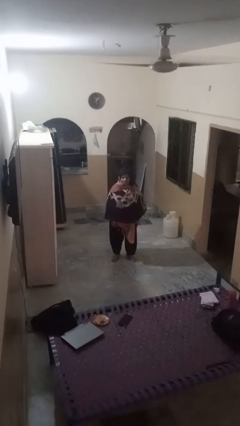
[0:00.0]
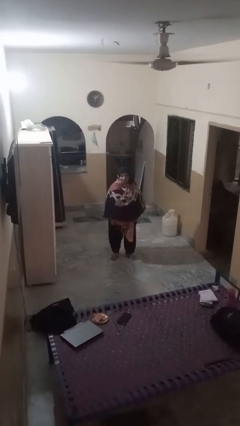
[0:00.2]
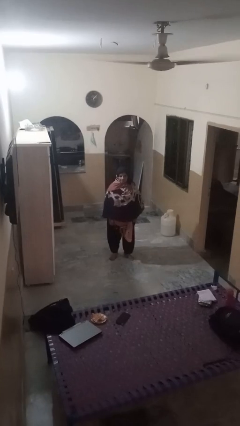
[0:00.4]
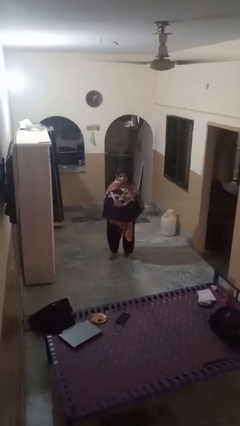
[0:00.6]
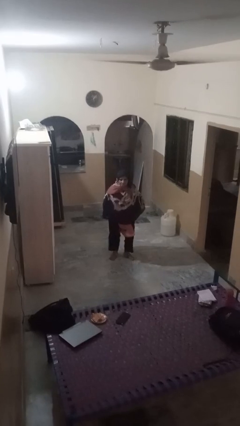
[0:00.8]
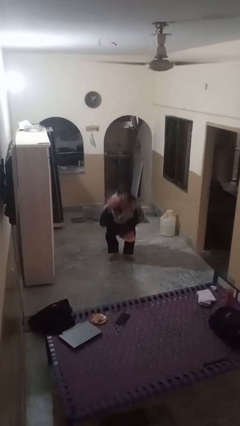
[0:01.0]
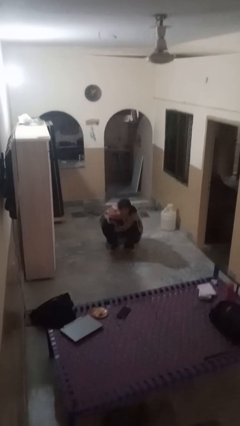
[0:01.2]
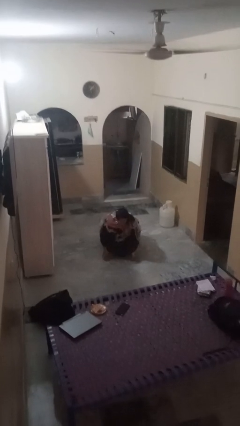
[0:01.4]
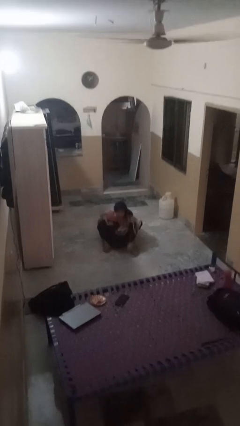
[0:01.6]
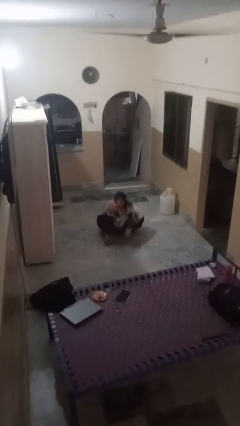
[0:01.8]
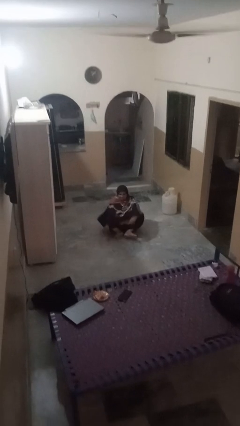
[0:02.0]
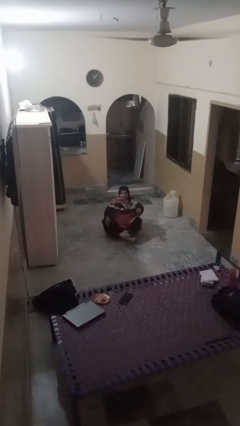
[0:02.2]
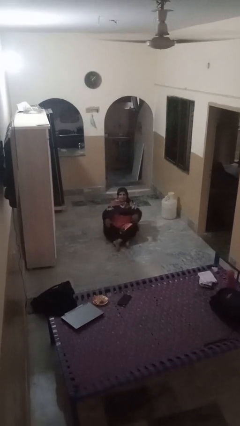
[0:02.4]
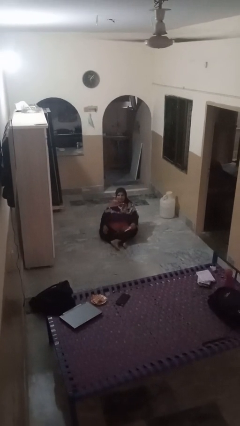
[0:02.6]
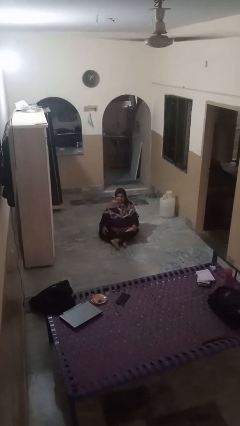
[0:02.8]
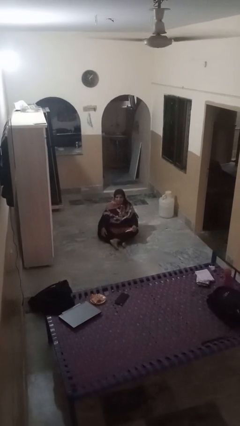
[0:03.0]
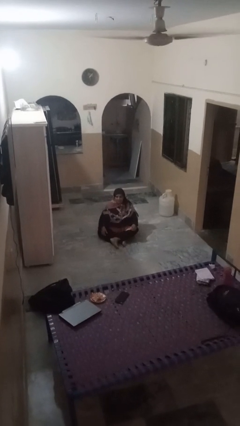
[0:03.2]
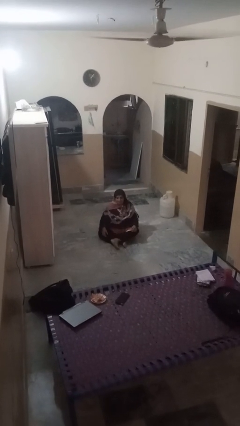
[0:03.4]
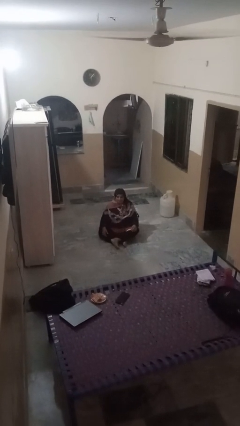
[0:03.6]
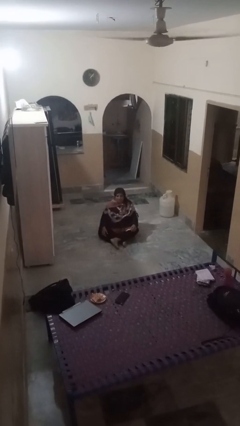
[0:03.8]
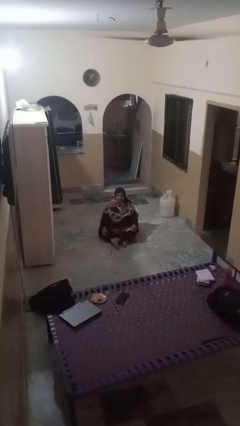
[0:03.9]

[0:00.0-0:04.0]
person sits crisscross

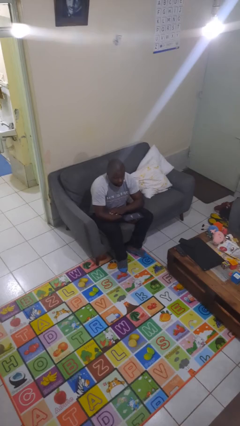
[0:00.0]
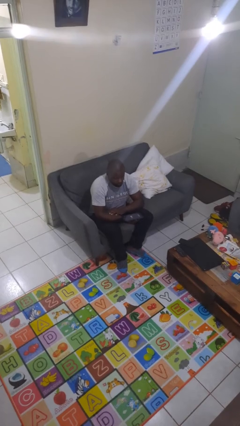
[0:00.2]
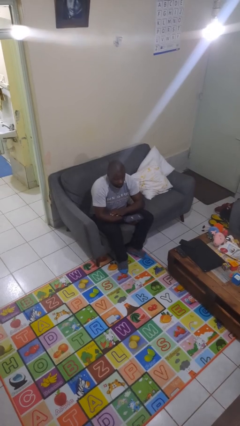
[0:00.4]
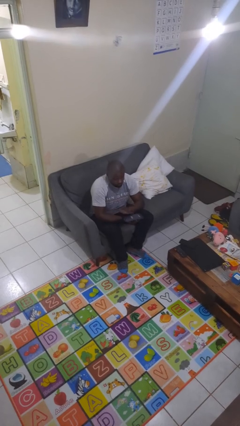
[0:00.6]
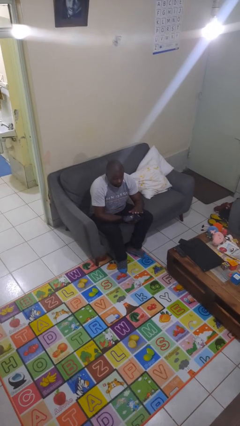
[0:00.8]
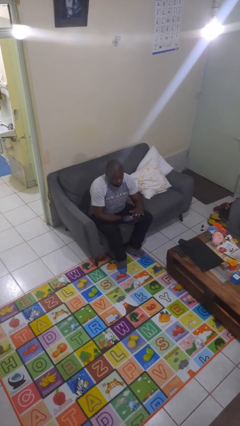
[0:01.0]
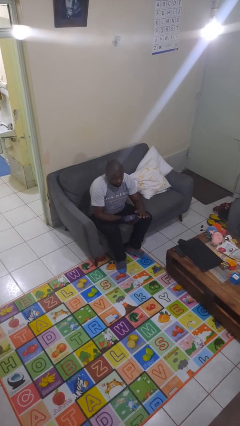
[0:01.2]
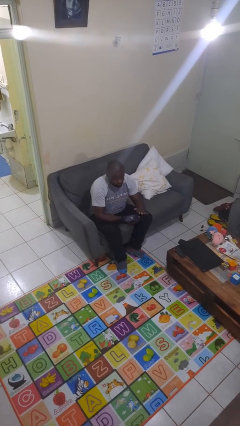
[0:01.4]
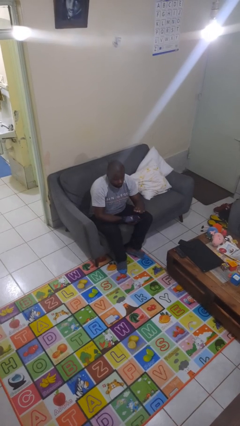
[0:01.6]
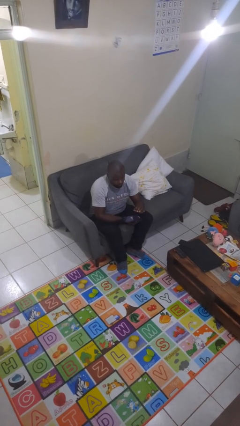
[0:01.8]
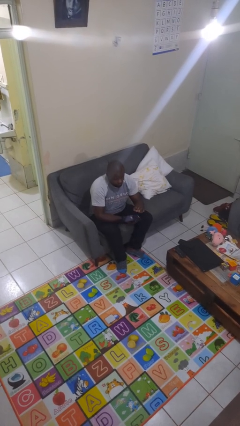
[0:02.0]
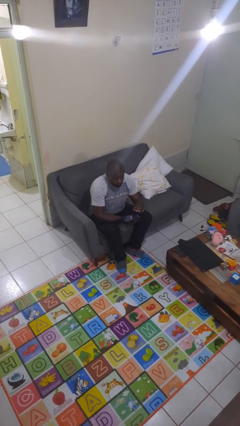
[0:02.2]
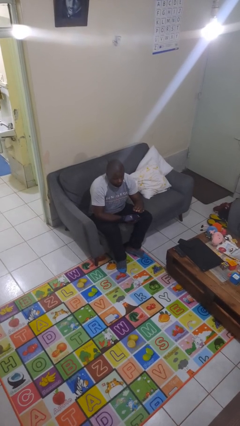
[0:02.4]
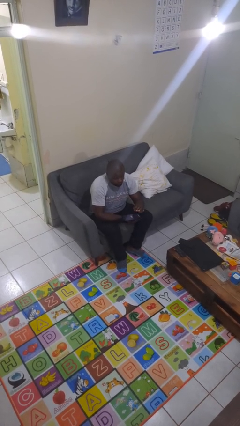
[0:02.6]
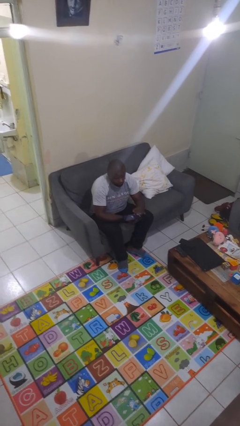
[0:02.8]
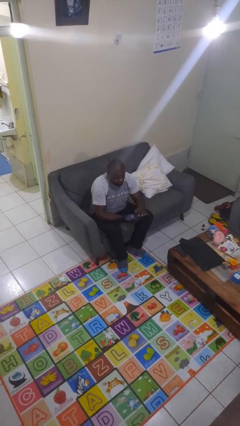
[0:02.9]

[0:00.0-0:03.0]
person interacts with tablet

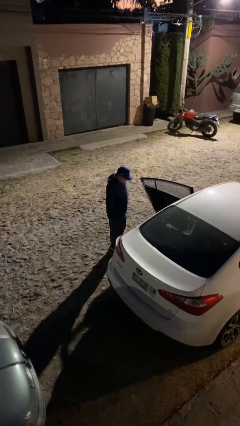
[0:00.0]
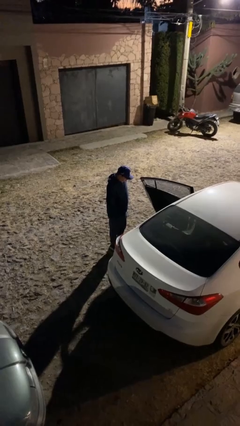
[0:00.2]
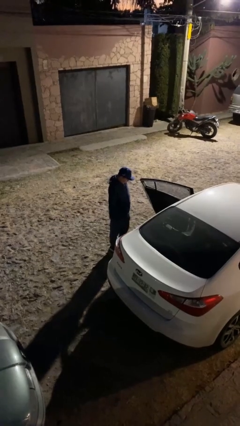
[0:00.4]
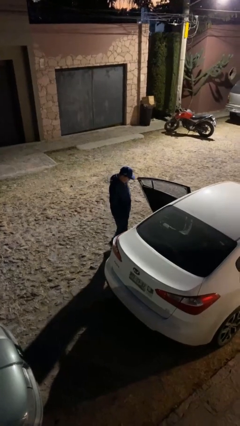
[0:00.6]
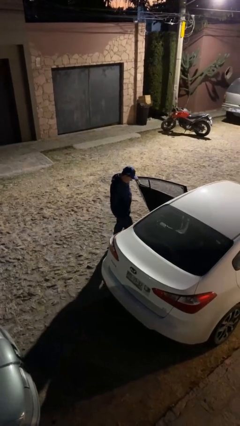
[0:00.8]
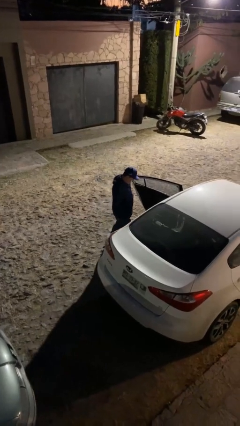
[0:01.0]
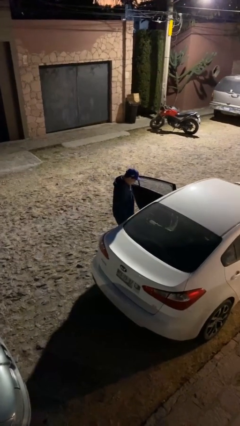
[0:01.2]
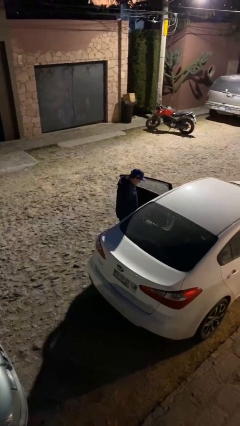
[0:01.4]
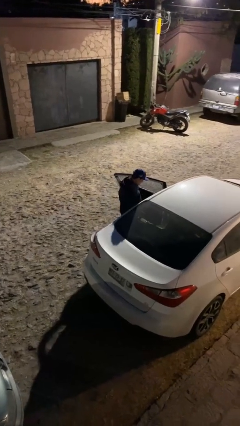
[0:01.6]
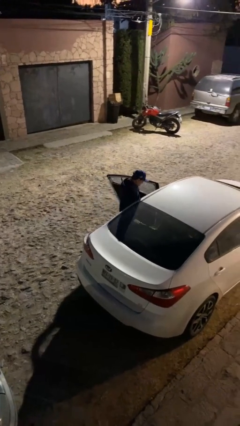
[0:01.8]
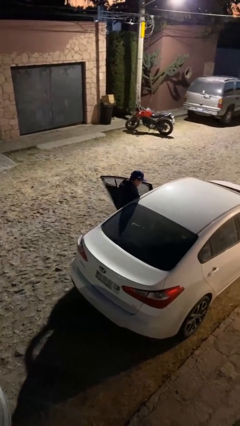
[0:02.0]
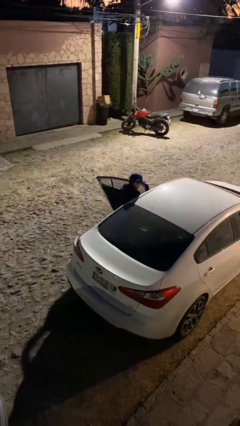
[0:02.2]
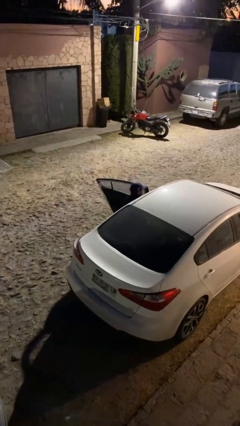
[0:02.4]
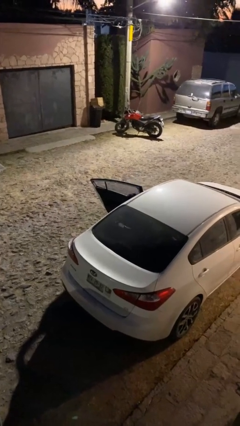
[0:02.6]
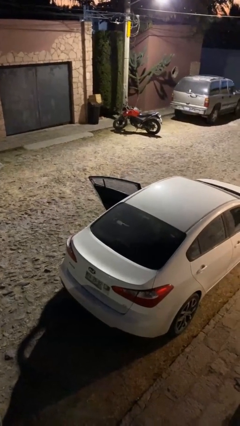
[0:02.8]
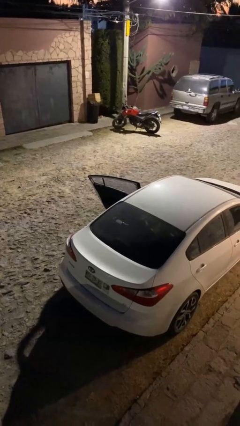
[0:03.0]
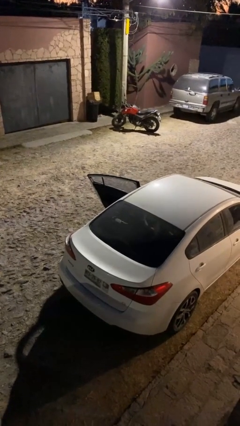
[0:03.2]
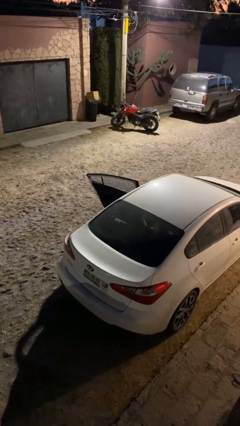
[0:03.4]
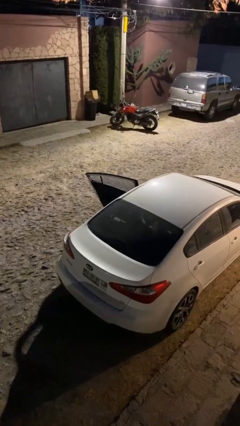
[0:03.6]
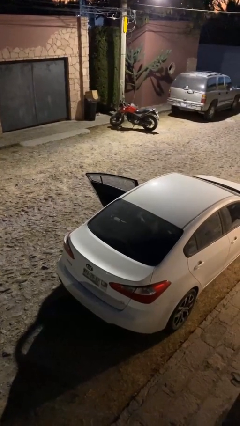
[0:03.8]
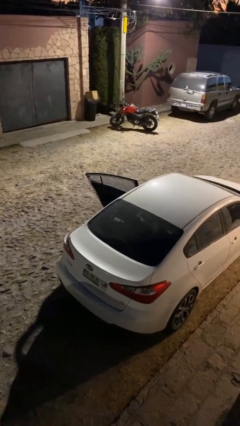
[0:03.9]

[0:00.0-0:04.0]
person enters car

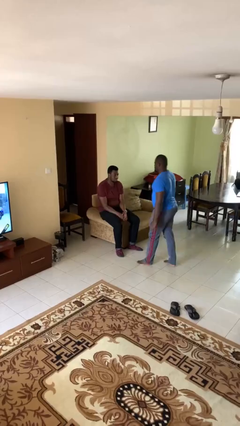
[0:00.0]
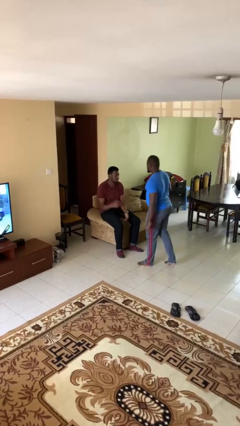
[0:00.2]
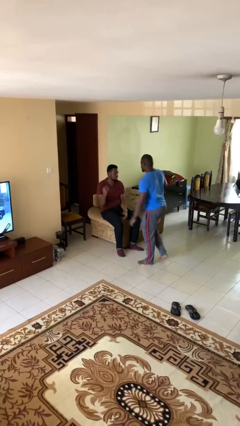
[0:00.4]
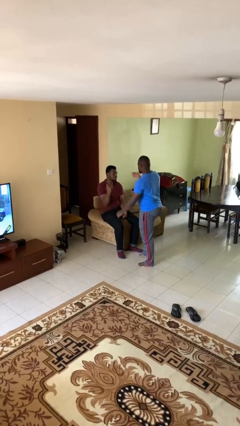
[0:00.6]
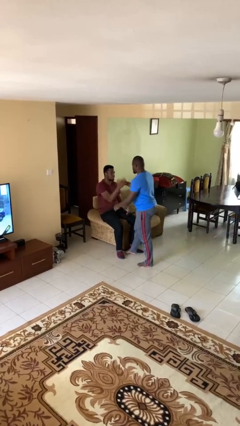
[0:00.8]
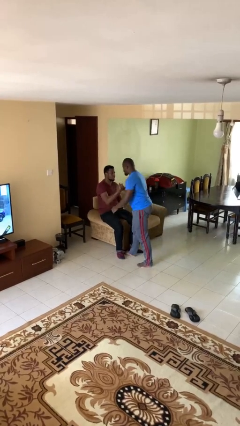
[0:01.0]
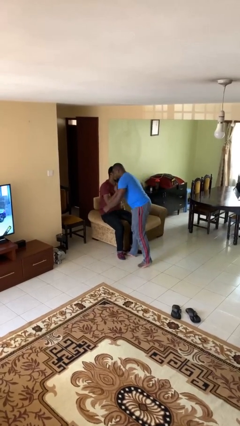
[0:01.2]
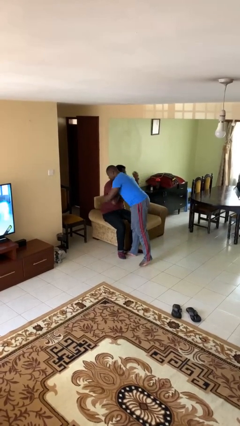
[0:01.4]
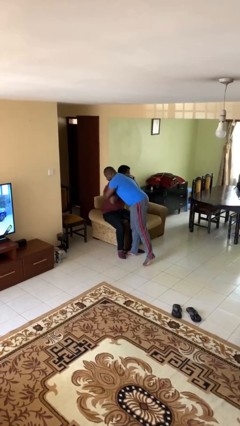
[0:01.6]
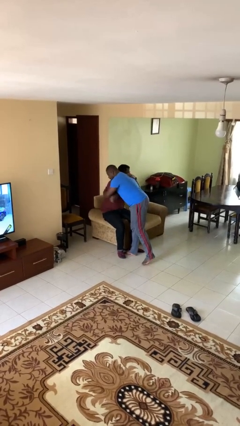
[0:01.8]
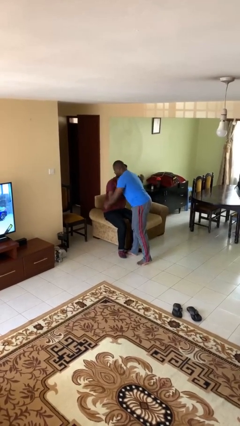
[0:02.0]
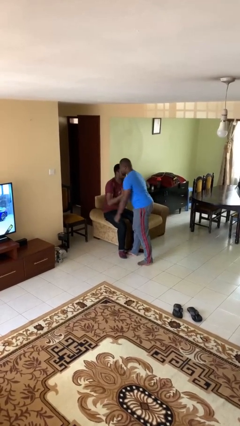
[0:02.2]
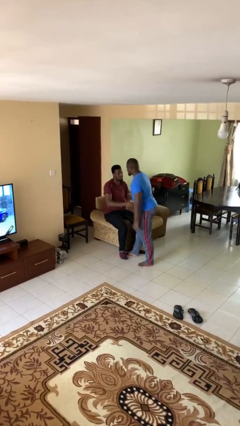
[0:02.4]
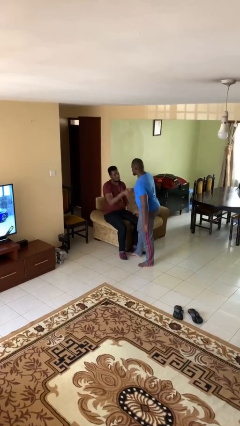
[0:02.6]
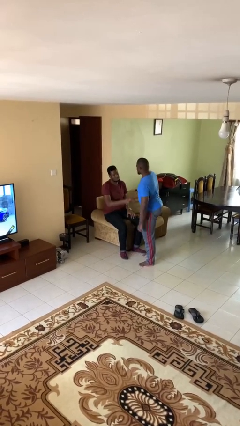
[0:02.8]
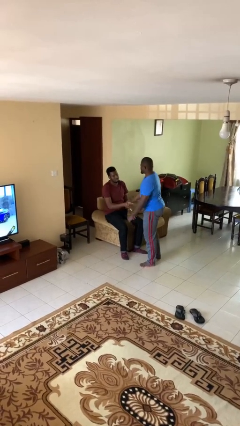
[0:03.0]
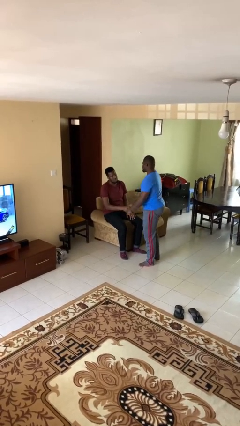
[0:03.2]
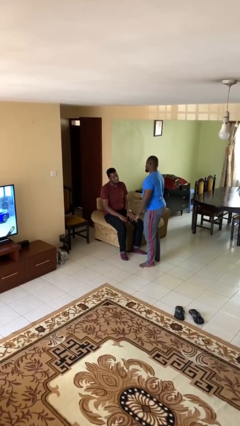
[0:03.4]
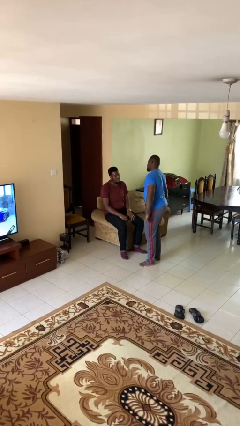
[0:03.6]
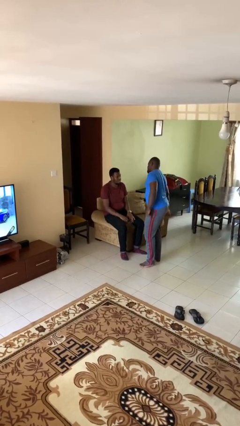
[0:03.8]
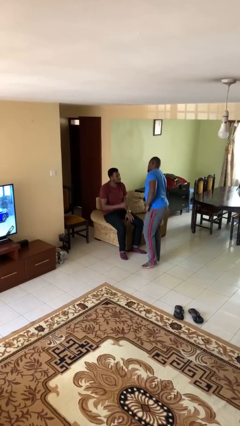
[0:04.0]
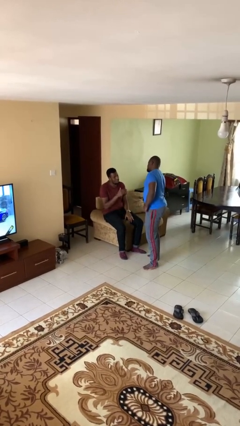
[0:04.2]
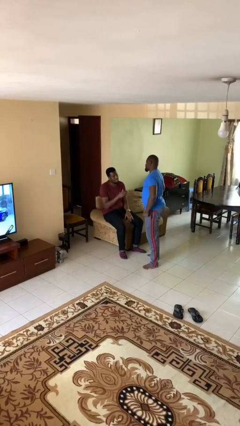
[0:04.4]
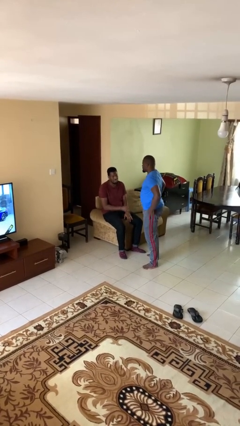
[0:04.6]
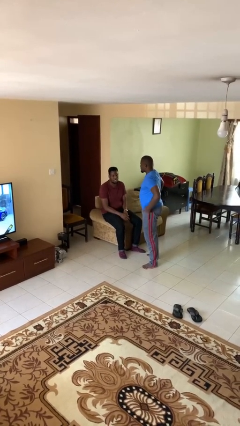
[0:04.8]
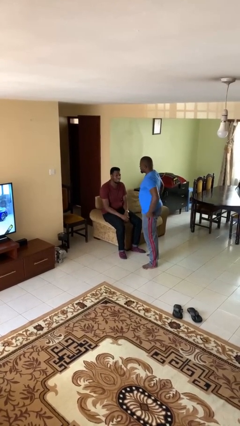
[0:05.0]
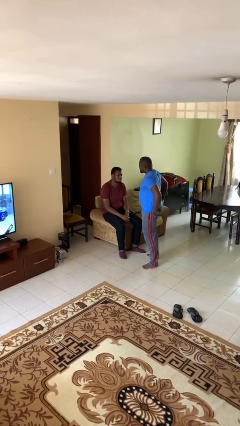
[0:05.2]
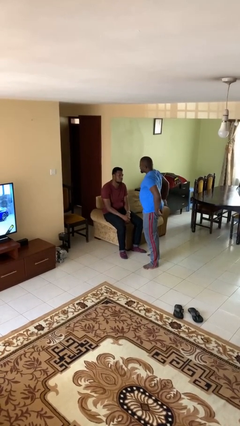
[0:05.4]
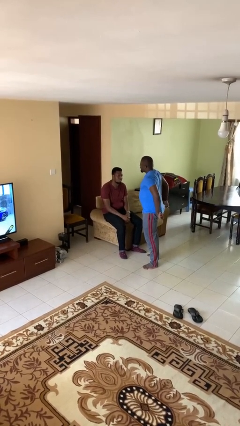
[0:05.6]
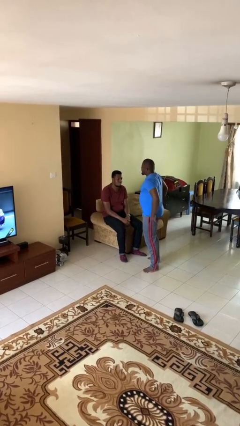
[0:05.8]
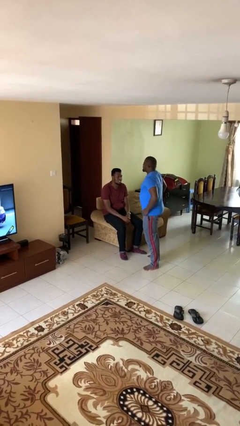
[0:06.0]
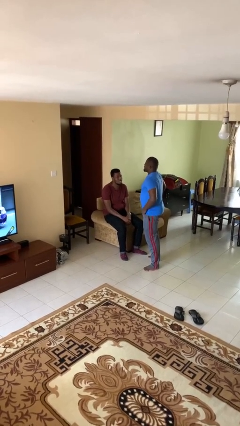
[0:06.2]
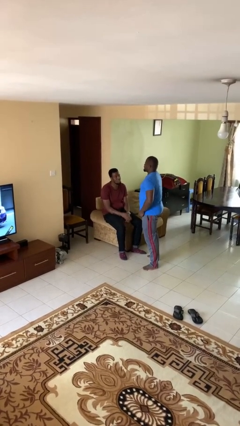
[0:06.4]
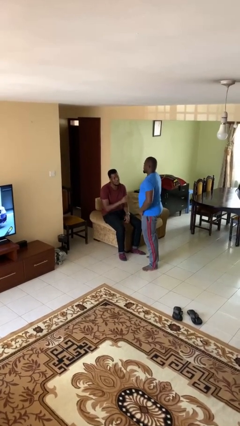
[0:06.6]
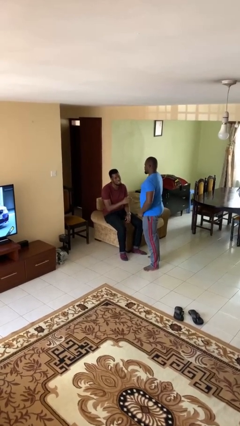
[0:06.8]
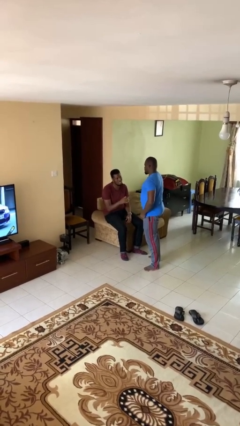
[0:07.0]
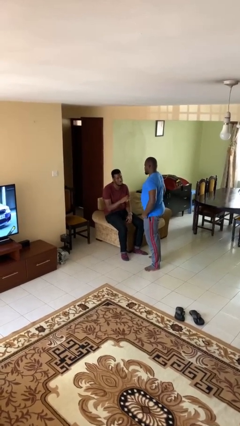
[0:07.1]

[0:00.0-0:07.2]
person embraces person
